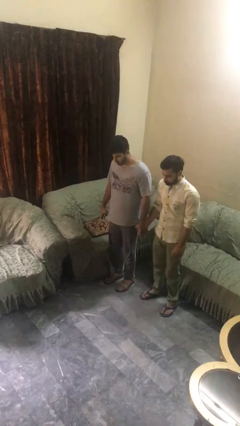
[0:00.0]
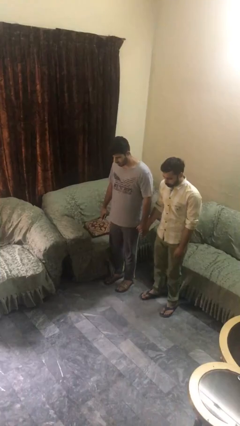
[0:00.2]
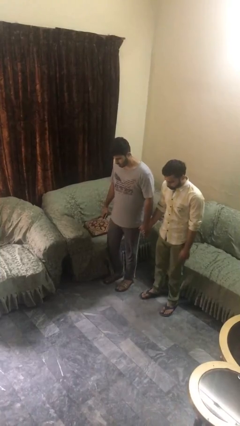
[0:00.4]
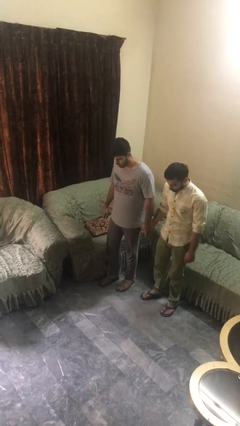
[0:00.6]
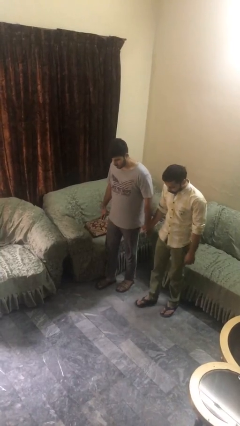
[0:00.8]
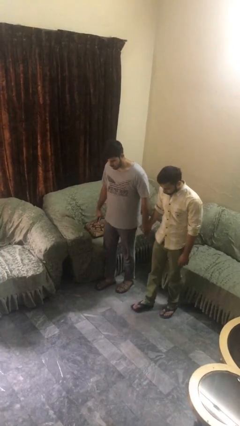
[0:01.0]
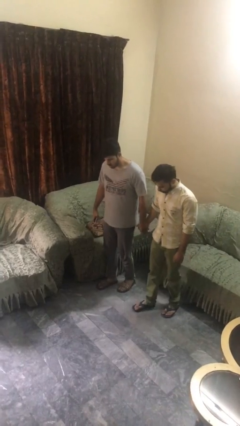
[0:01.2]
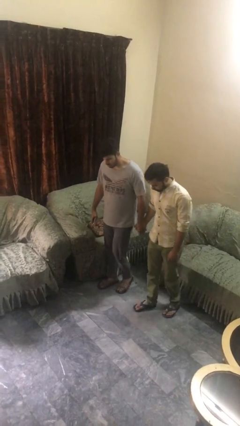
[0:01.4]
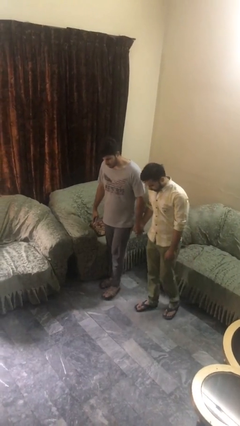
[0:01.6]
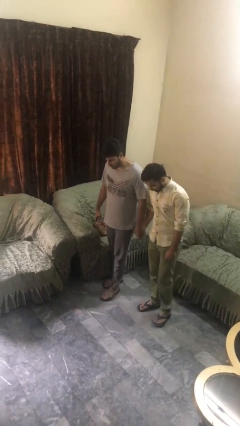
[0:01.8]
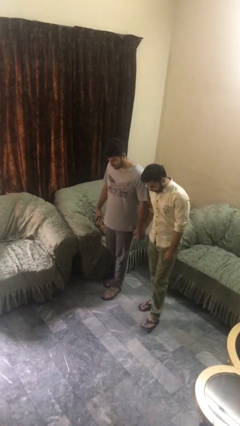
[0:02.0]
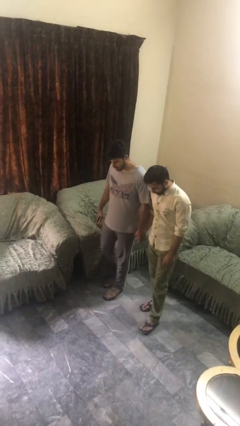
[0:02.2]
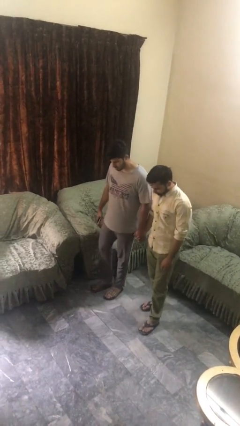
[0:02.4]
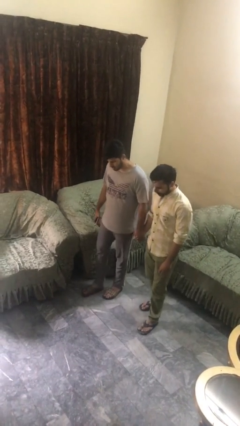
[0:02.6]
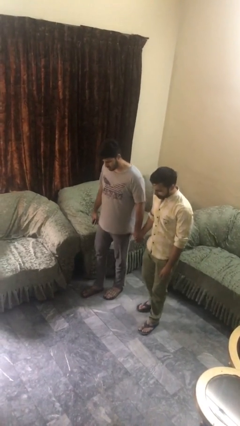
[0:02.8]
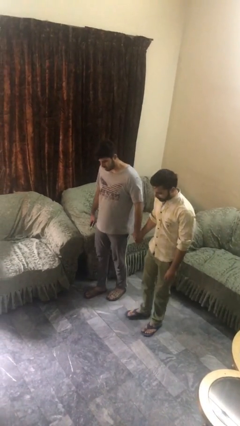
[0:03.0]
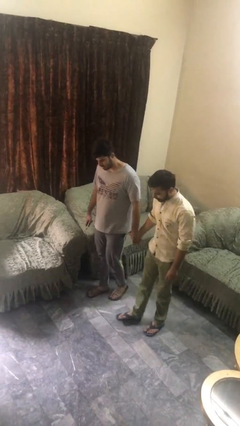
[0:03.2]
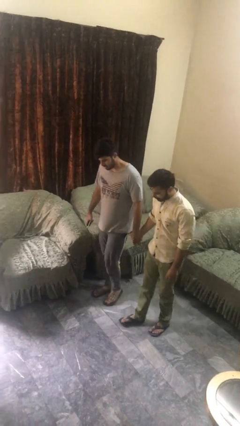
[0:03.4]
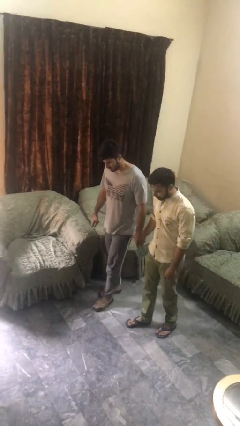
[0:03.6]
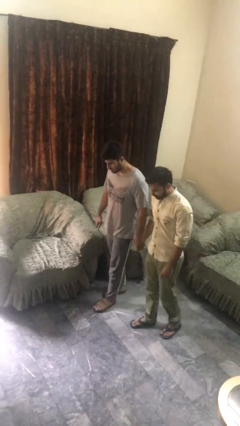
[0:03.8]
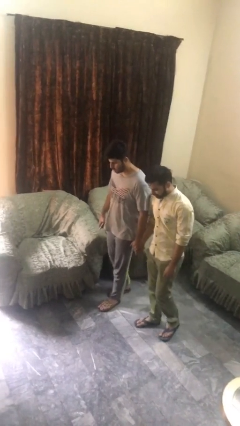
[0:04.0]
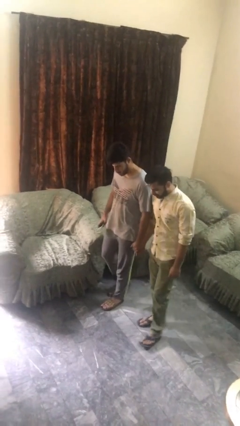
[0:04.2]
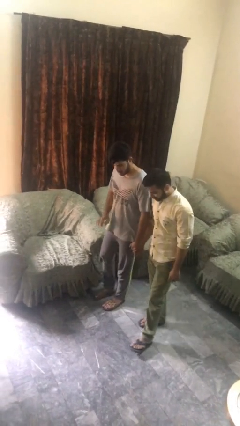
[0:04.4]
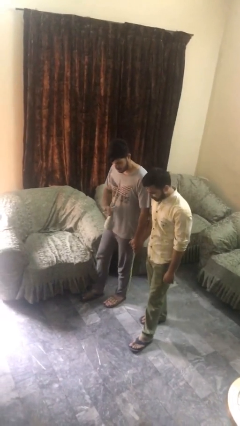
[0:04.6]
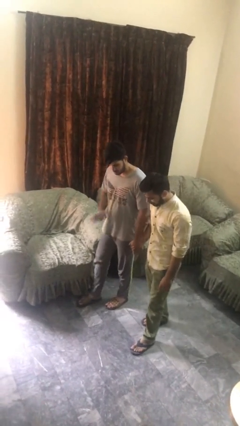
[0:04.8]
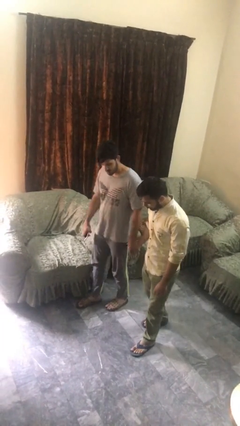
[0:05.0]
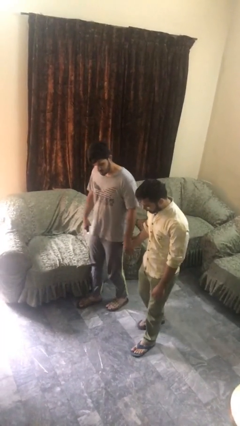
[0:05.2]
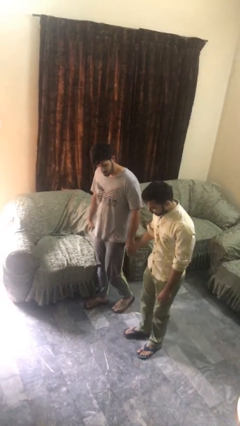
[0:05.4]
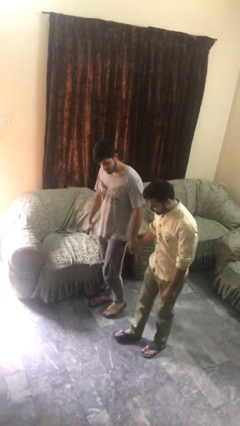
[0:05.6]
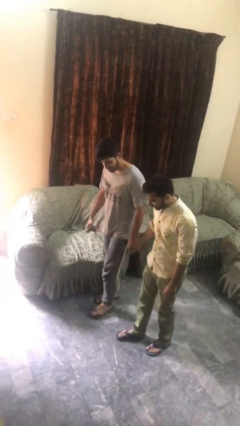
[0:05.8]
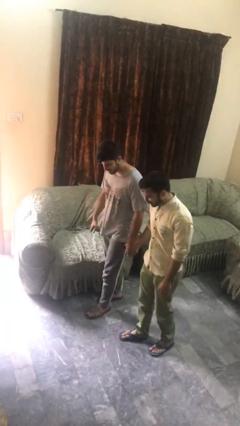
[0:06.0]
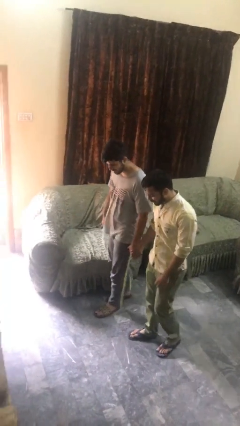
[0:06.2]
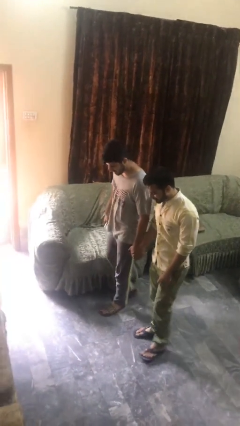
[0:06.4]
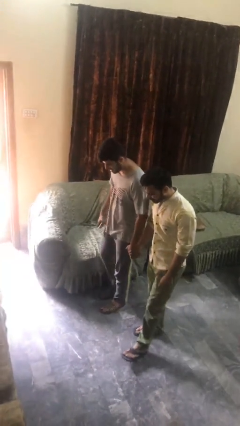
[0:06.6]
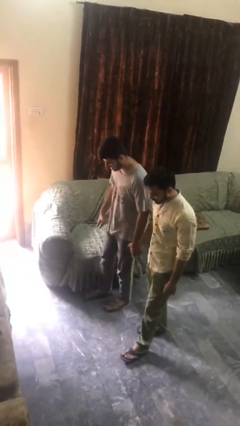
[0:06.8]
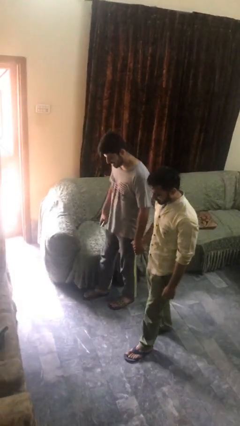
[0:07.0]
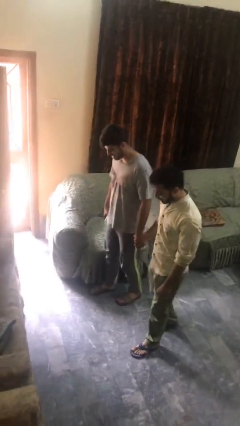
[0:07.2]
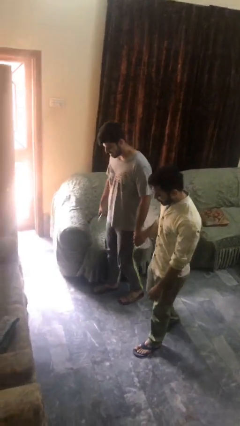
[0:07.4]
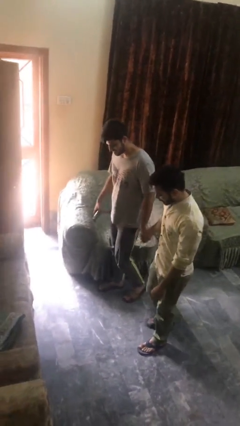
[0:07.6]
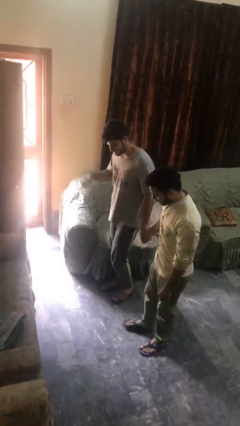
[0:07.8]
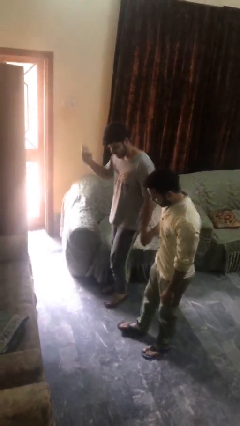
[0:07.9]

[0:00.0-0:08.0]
person holds hand

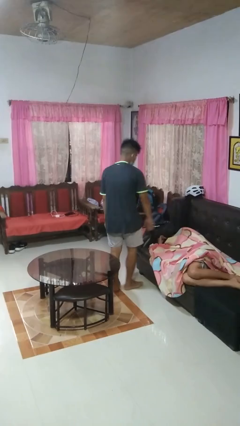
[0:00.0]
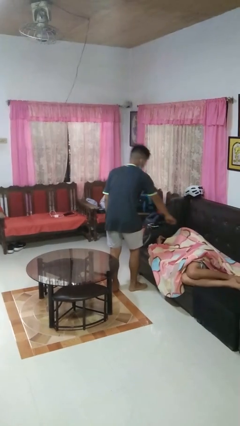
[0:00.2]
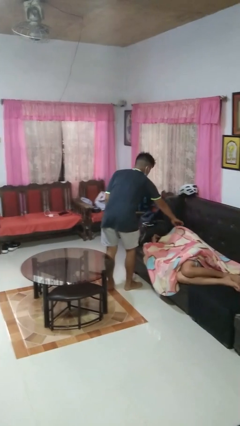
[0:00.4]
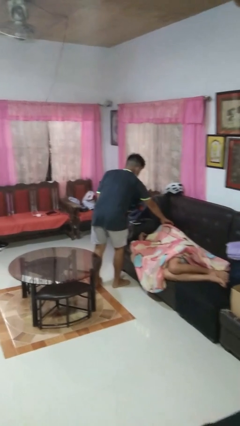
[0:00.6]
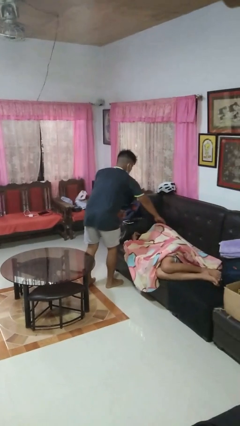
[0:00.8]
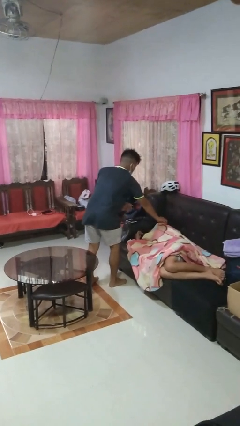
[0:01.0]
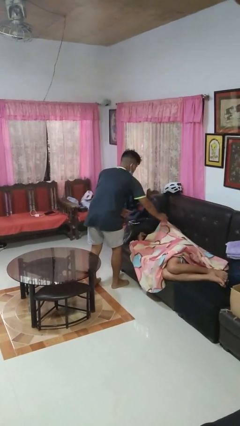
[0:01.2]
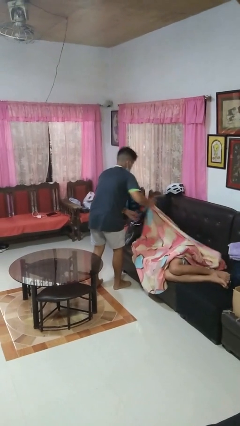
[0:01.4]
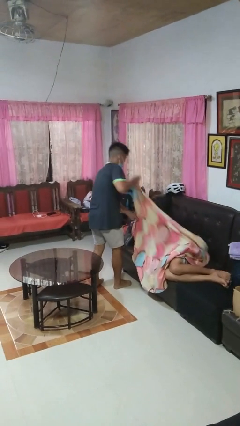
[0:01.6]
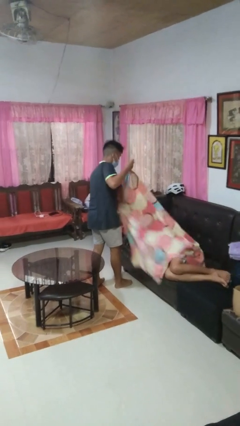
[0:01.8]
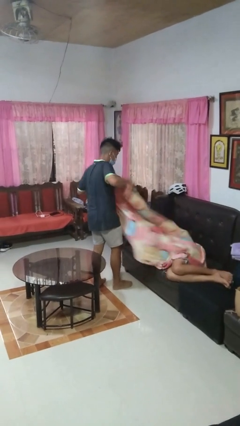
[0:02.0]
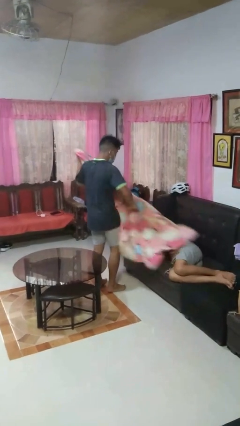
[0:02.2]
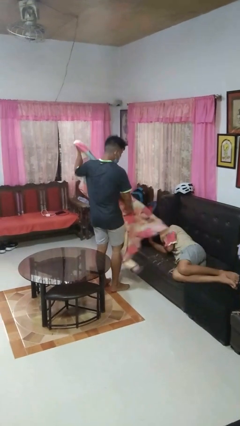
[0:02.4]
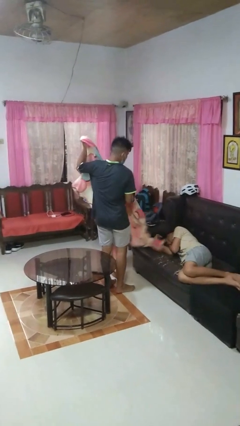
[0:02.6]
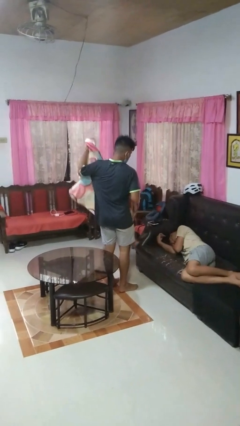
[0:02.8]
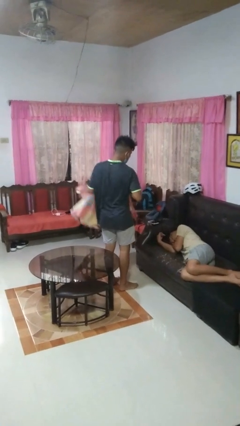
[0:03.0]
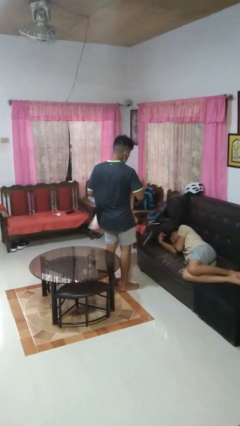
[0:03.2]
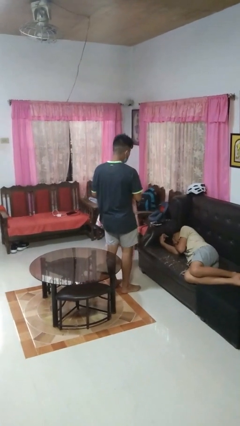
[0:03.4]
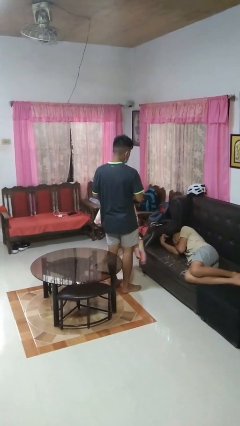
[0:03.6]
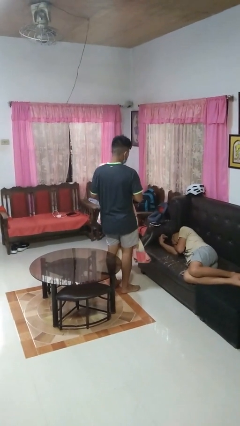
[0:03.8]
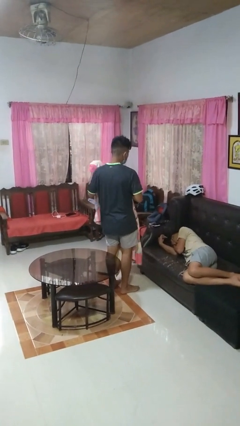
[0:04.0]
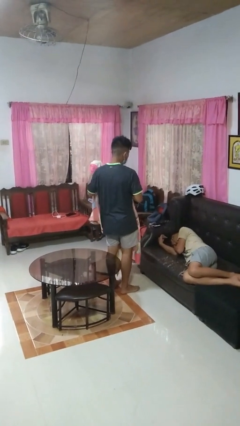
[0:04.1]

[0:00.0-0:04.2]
person uncovers friend with blanket

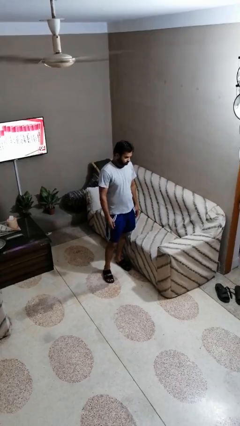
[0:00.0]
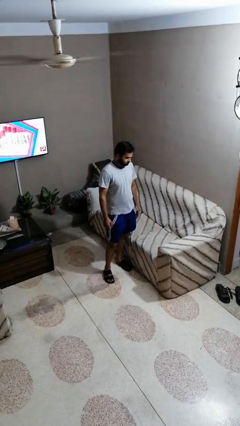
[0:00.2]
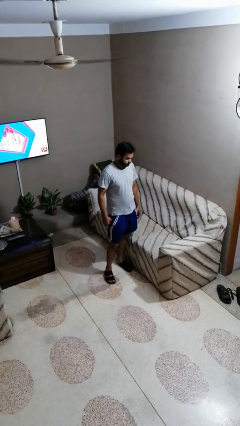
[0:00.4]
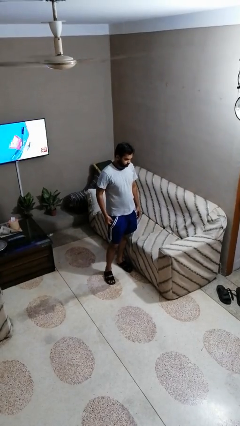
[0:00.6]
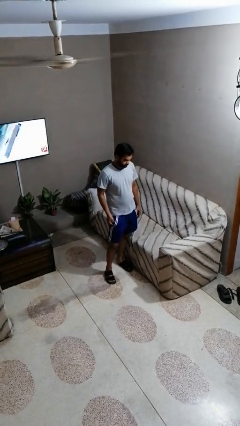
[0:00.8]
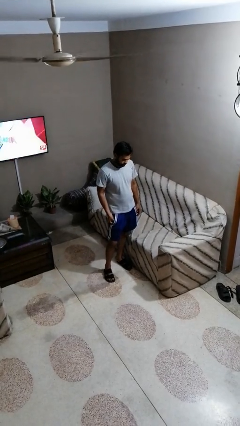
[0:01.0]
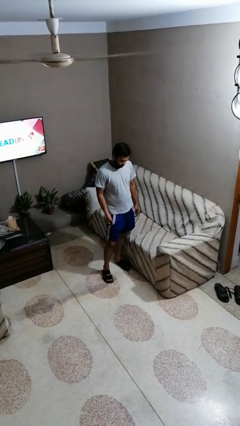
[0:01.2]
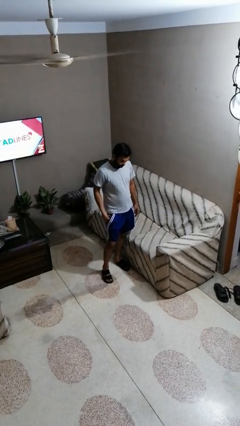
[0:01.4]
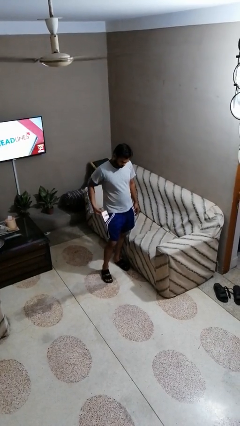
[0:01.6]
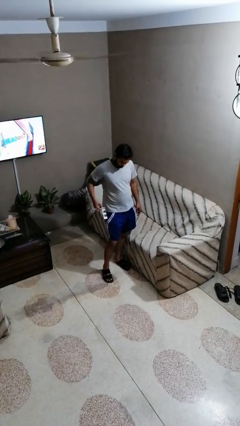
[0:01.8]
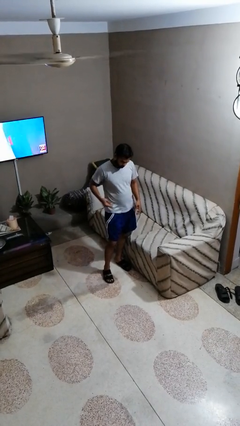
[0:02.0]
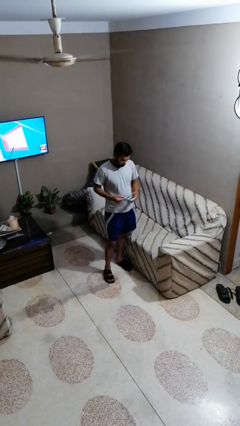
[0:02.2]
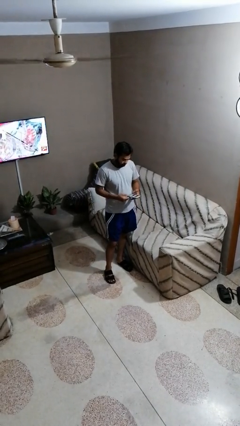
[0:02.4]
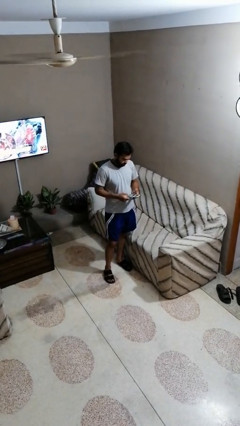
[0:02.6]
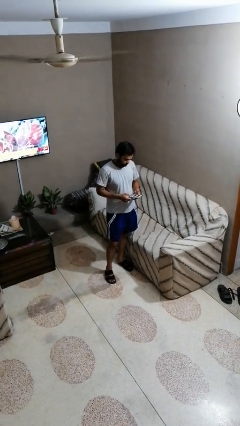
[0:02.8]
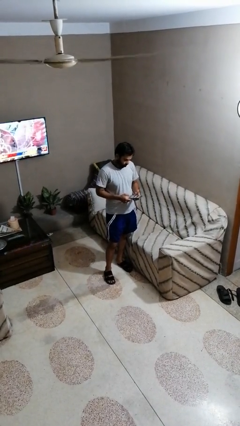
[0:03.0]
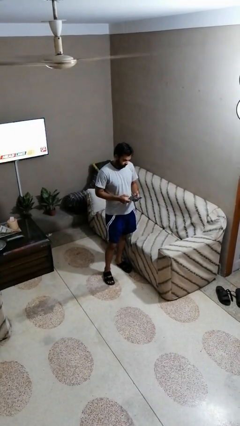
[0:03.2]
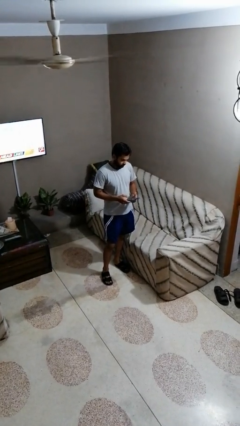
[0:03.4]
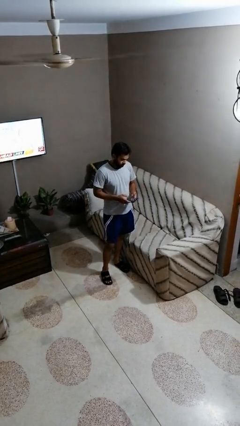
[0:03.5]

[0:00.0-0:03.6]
person takes phone from pocket

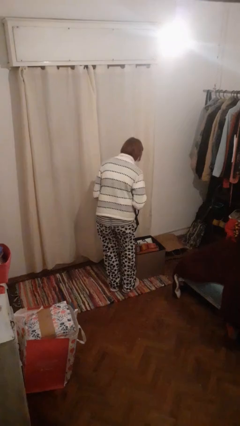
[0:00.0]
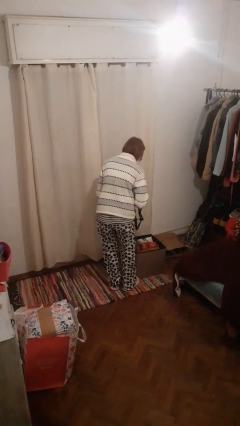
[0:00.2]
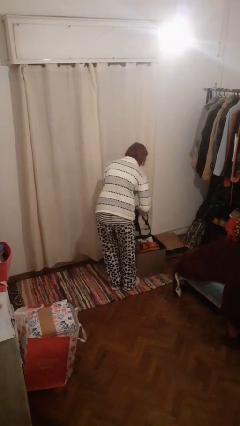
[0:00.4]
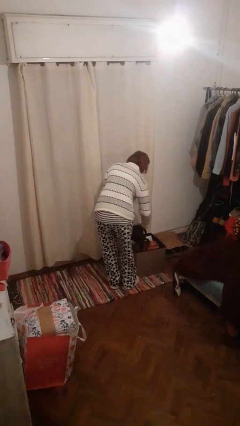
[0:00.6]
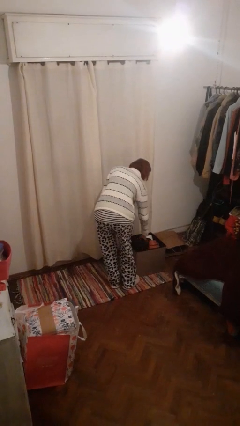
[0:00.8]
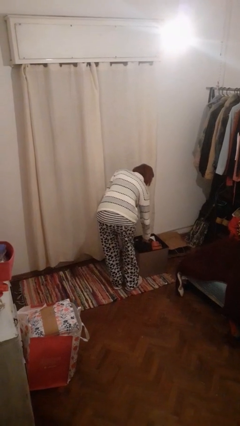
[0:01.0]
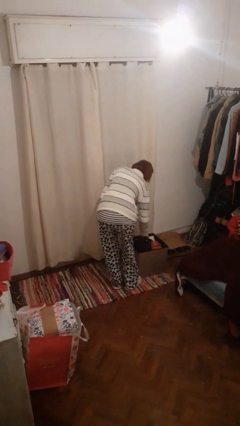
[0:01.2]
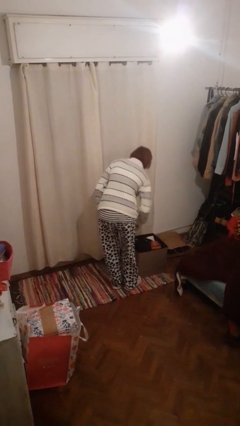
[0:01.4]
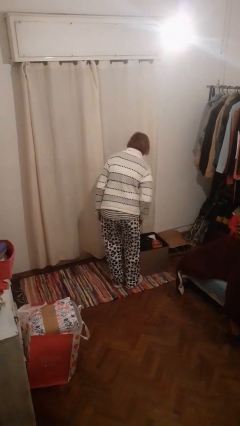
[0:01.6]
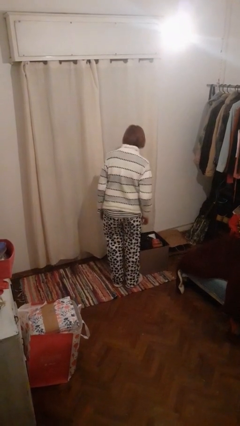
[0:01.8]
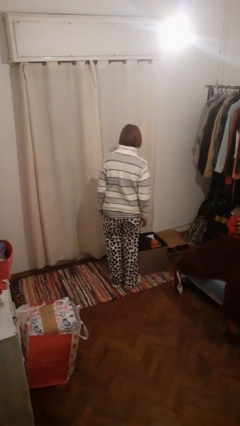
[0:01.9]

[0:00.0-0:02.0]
person puts object into basket
